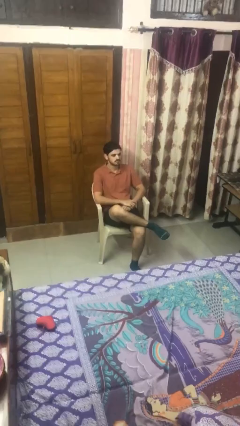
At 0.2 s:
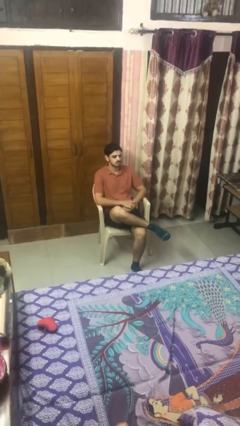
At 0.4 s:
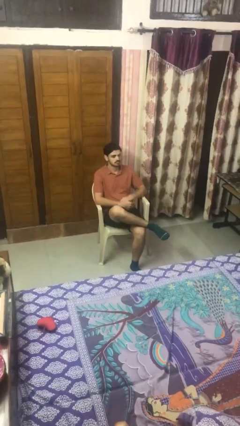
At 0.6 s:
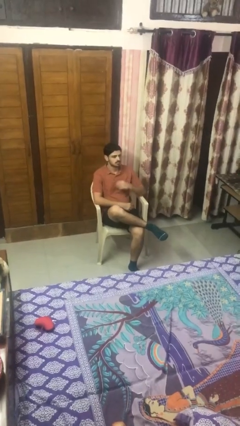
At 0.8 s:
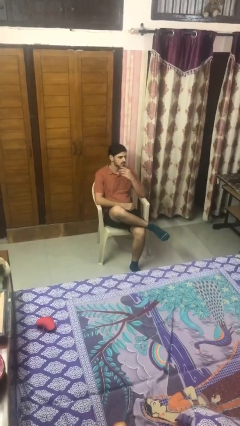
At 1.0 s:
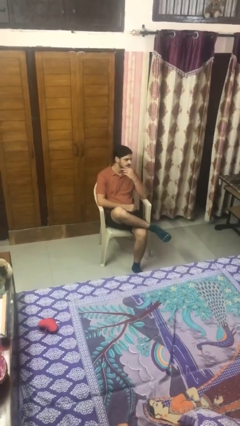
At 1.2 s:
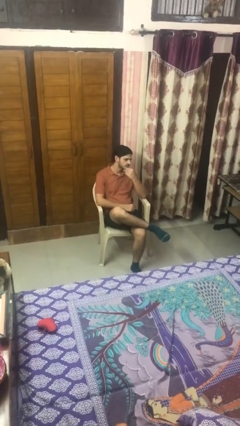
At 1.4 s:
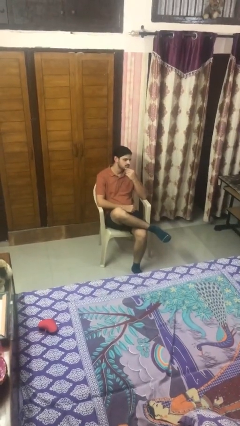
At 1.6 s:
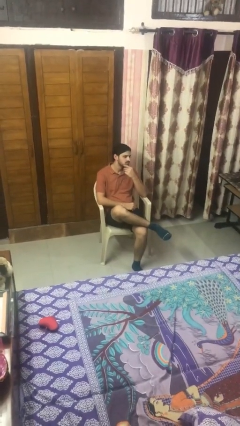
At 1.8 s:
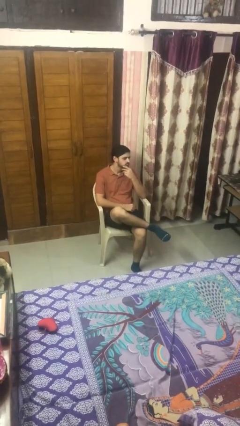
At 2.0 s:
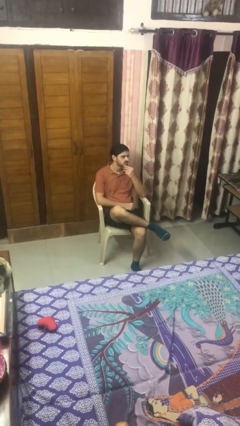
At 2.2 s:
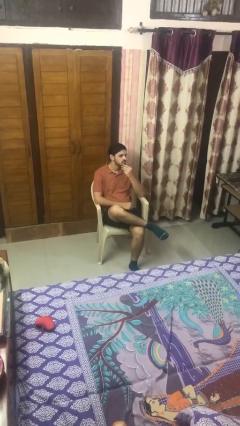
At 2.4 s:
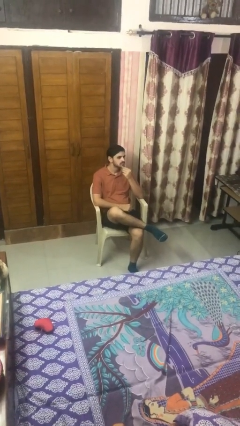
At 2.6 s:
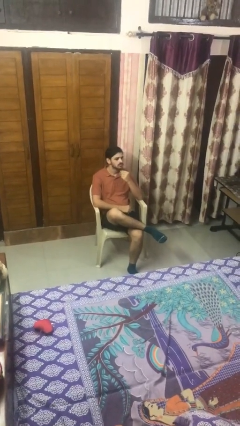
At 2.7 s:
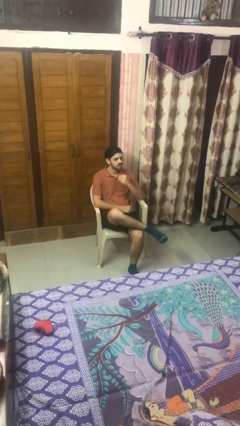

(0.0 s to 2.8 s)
person strokes chin

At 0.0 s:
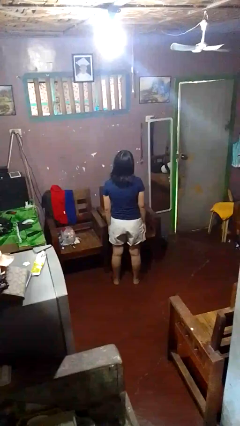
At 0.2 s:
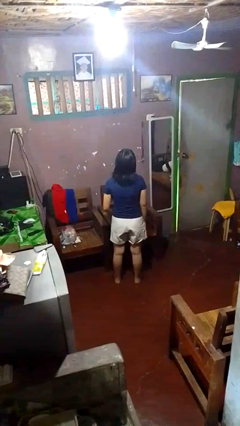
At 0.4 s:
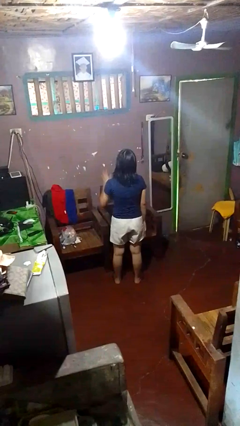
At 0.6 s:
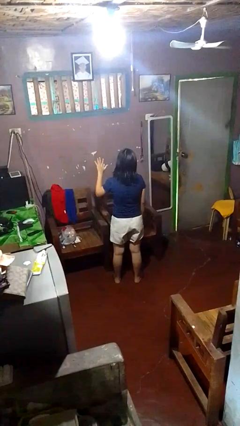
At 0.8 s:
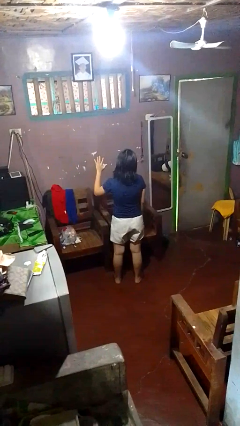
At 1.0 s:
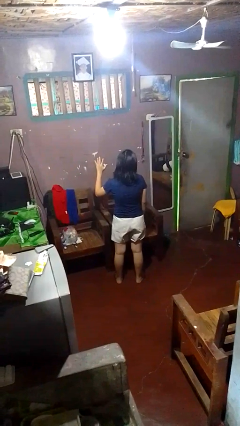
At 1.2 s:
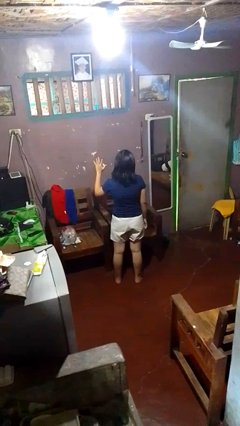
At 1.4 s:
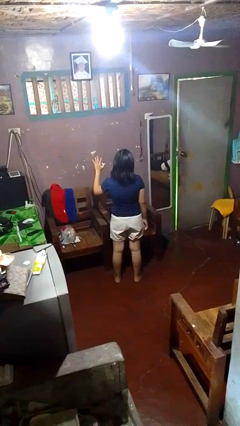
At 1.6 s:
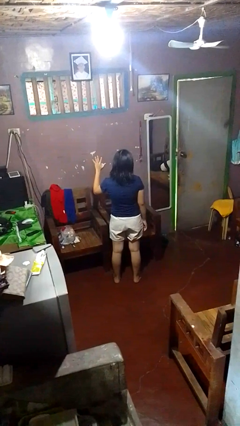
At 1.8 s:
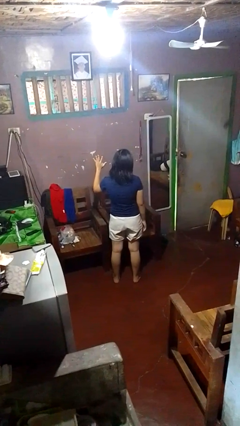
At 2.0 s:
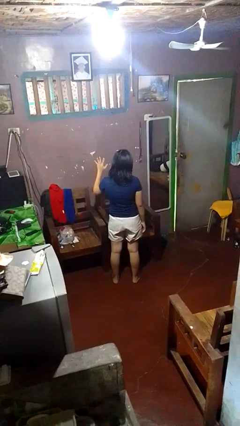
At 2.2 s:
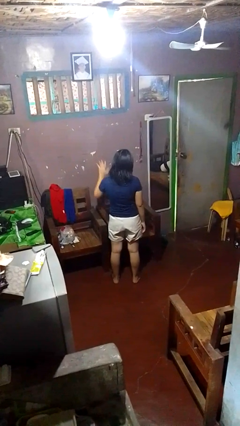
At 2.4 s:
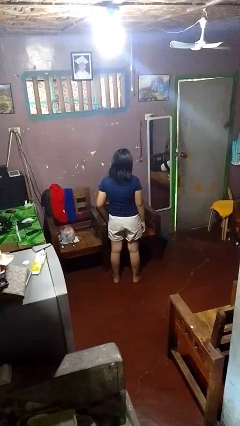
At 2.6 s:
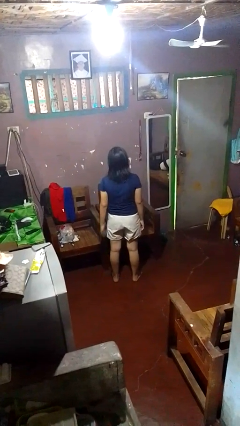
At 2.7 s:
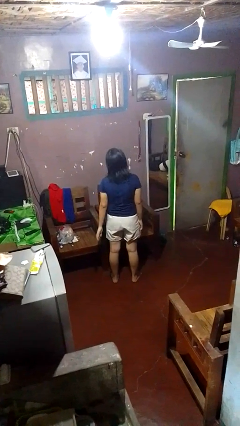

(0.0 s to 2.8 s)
person gestures number five

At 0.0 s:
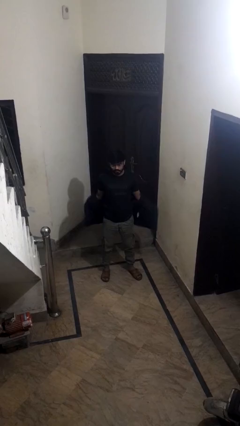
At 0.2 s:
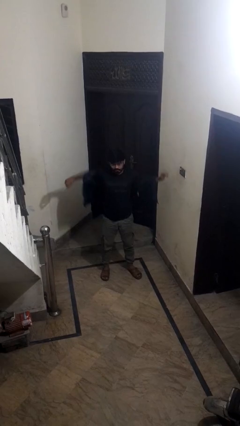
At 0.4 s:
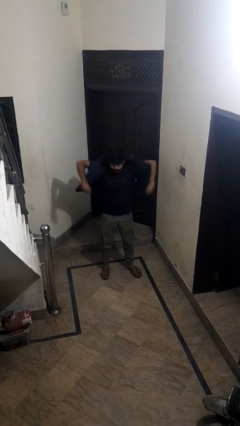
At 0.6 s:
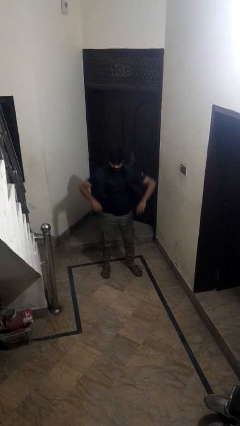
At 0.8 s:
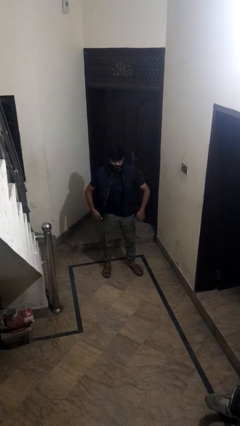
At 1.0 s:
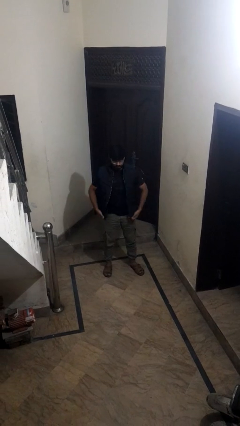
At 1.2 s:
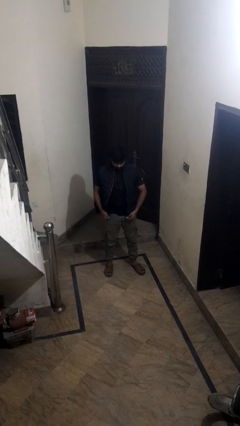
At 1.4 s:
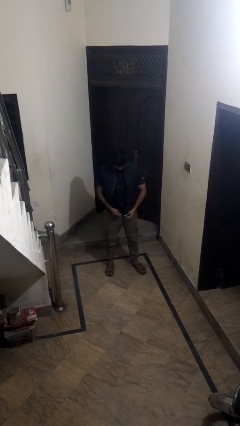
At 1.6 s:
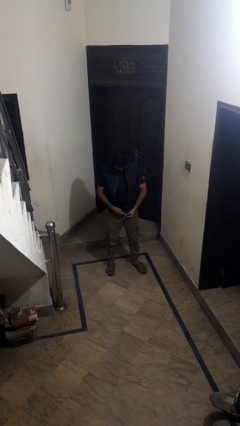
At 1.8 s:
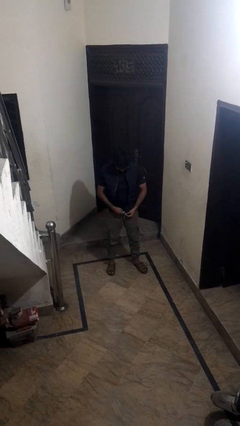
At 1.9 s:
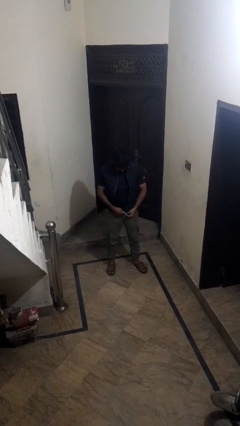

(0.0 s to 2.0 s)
person puts on jacket

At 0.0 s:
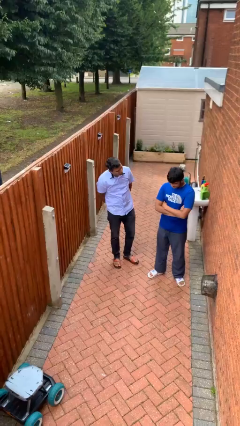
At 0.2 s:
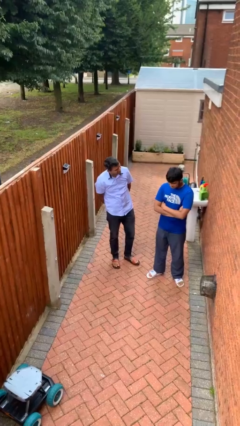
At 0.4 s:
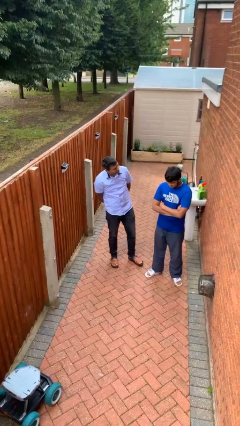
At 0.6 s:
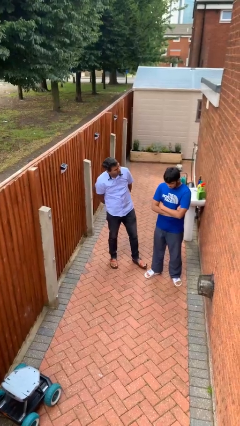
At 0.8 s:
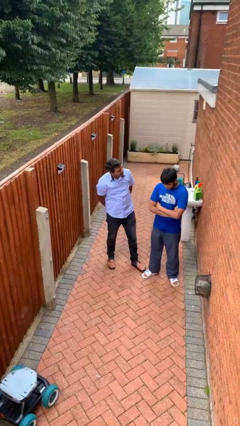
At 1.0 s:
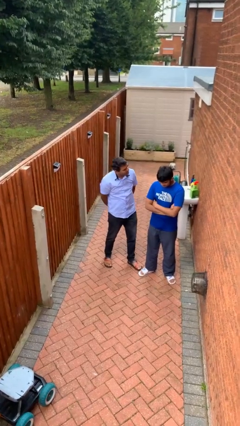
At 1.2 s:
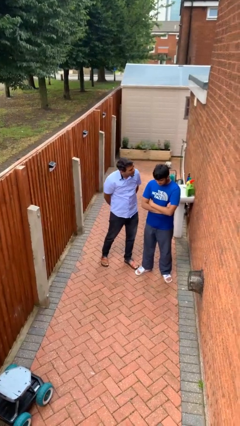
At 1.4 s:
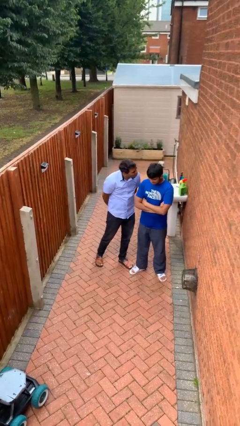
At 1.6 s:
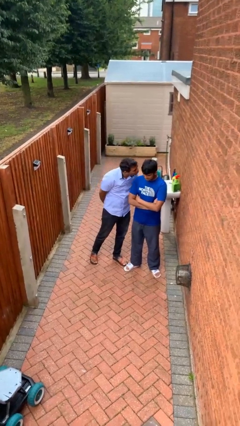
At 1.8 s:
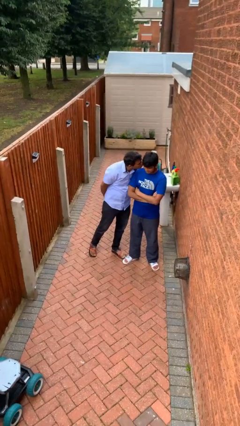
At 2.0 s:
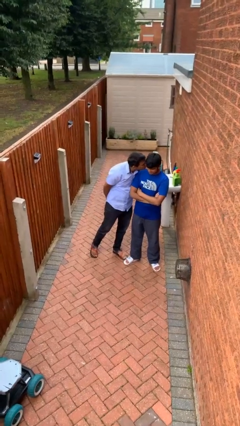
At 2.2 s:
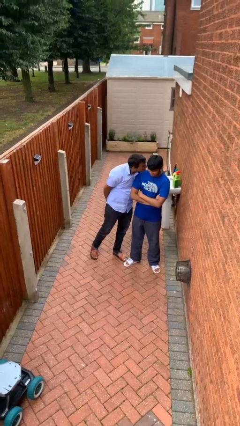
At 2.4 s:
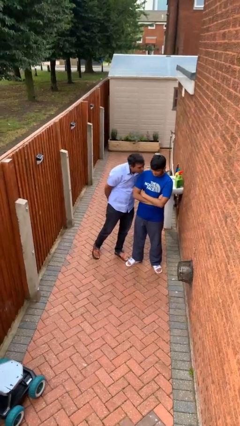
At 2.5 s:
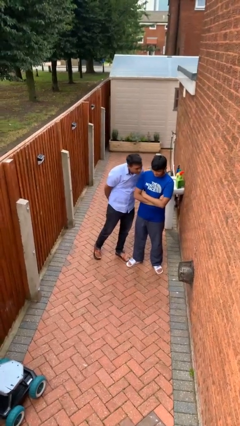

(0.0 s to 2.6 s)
person kisses cheek of person

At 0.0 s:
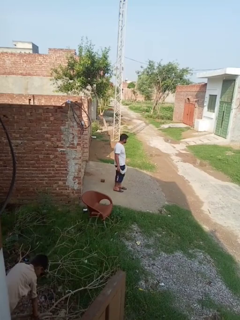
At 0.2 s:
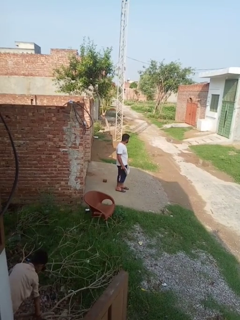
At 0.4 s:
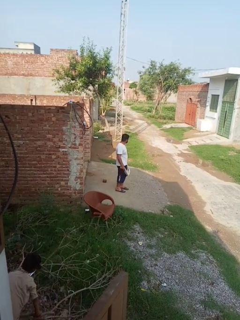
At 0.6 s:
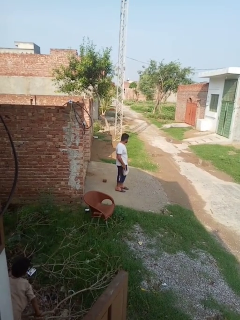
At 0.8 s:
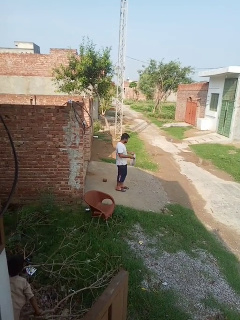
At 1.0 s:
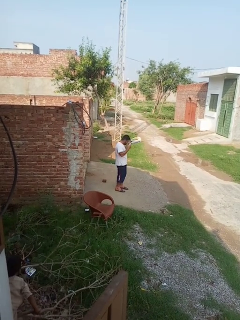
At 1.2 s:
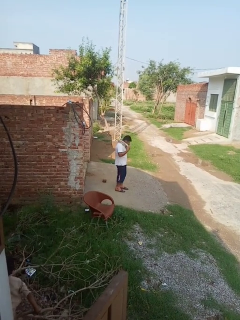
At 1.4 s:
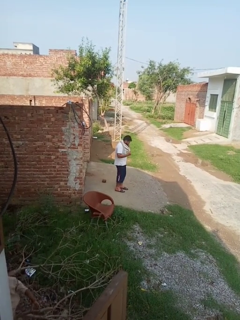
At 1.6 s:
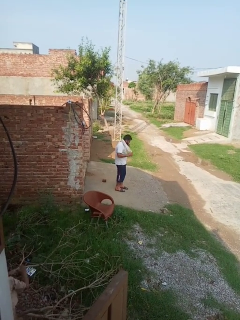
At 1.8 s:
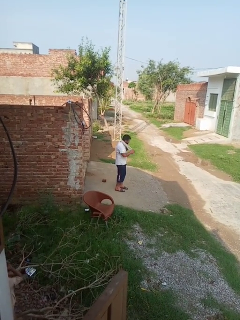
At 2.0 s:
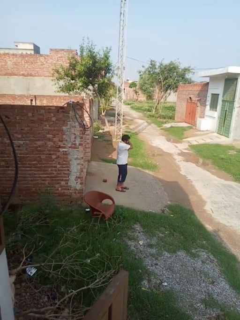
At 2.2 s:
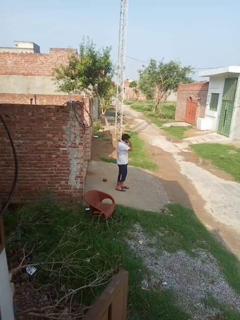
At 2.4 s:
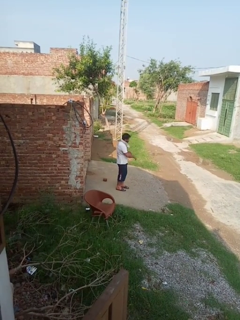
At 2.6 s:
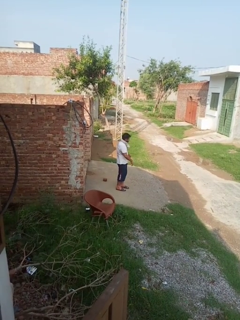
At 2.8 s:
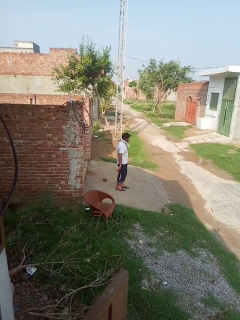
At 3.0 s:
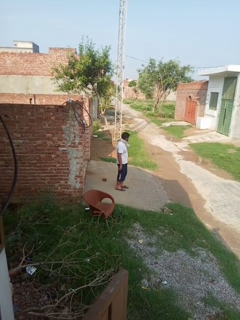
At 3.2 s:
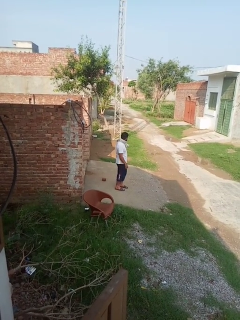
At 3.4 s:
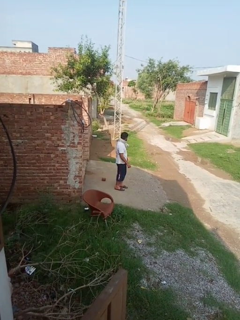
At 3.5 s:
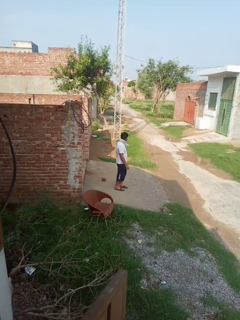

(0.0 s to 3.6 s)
person puts on scarf

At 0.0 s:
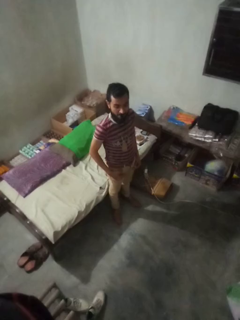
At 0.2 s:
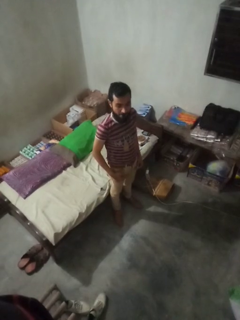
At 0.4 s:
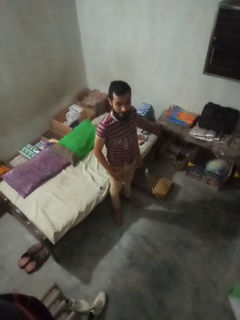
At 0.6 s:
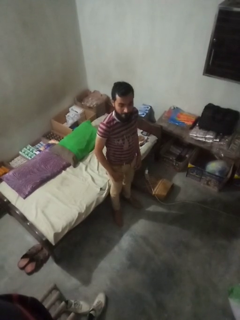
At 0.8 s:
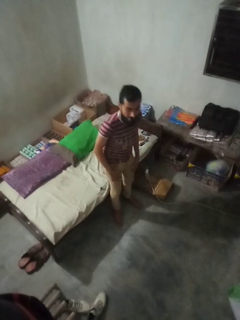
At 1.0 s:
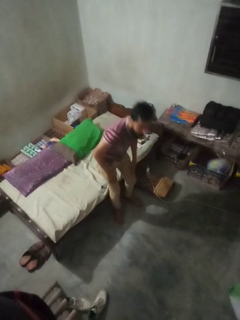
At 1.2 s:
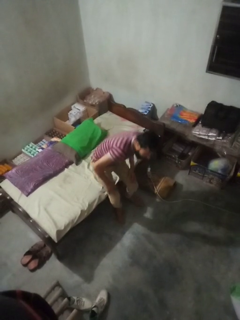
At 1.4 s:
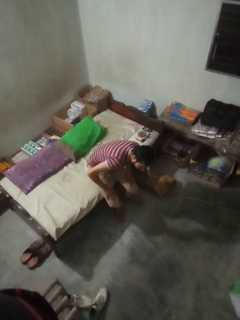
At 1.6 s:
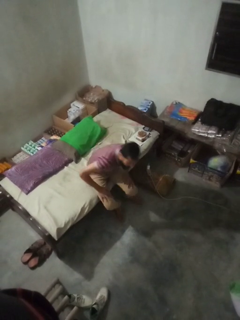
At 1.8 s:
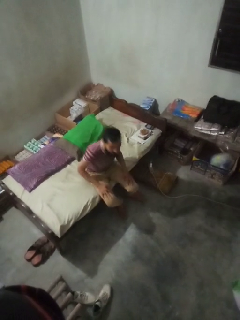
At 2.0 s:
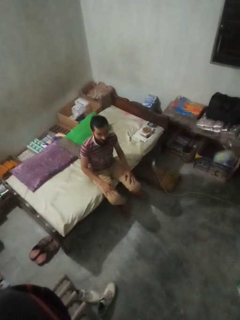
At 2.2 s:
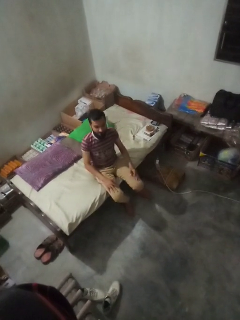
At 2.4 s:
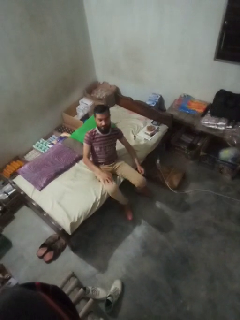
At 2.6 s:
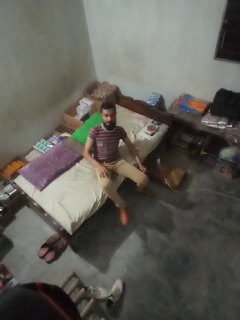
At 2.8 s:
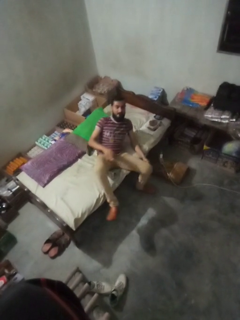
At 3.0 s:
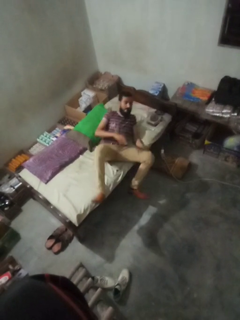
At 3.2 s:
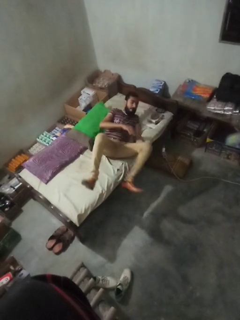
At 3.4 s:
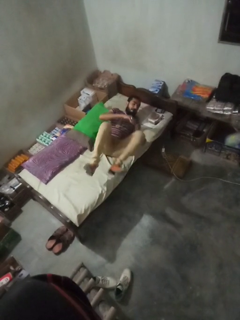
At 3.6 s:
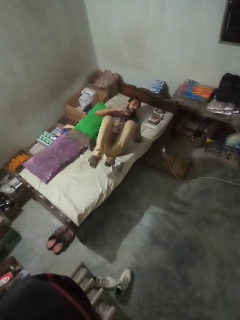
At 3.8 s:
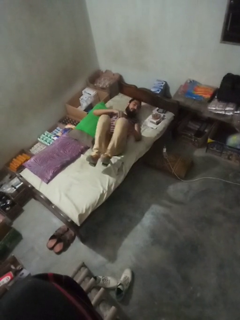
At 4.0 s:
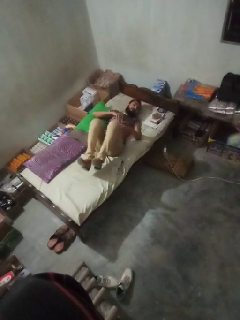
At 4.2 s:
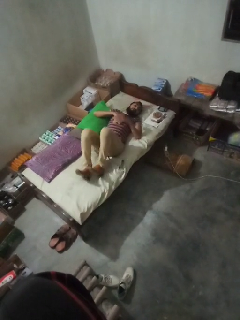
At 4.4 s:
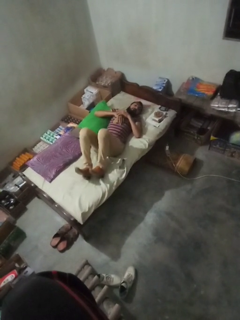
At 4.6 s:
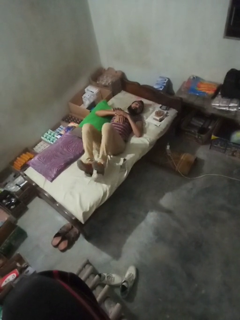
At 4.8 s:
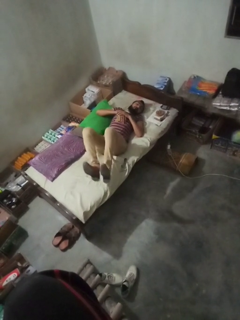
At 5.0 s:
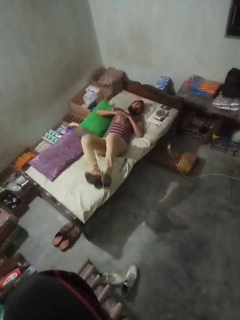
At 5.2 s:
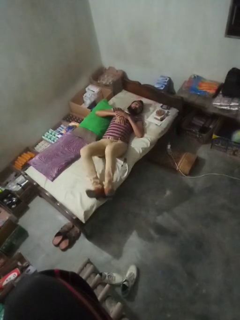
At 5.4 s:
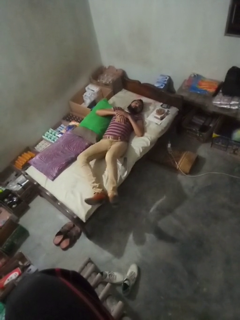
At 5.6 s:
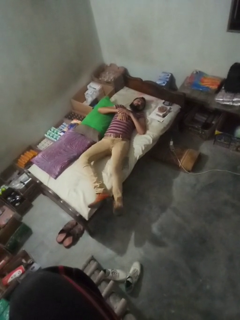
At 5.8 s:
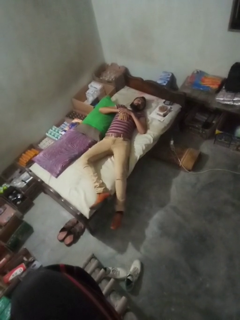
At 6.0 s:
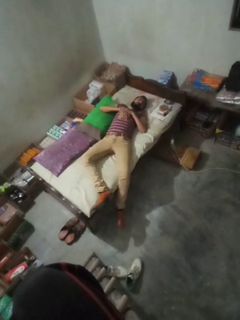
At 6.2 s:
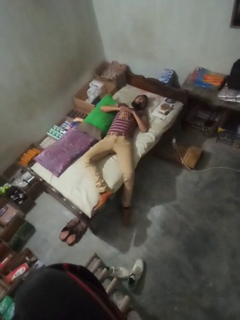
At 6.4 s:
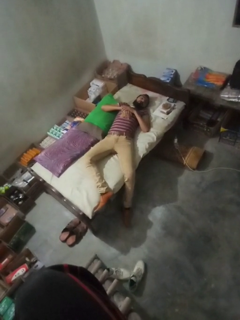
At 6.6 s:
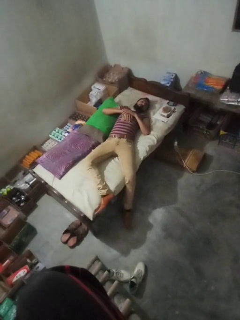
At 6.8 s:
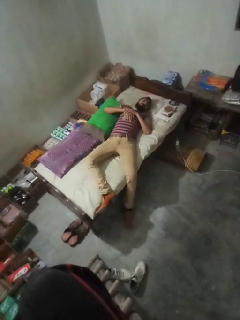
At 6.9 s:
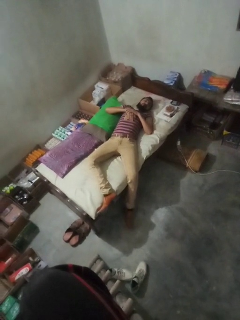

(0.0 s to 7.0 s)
person lies down on couch
